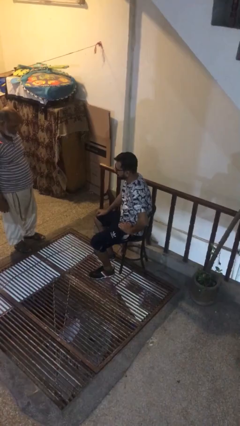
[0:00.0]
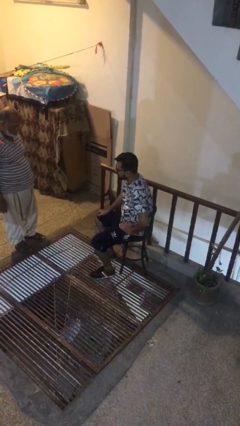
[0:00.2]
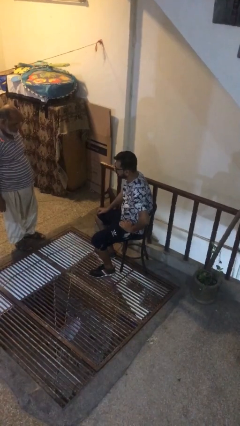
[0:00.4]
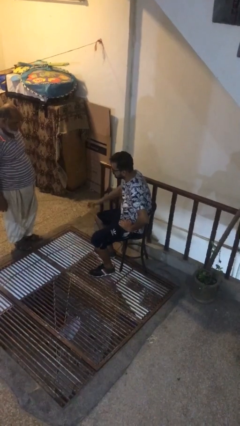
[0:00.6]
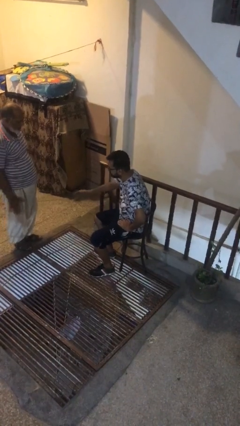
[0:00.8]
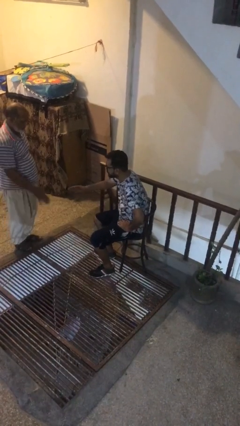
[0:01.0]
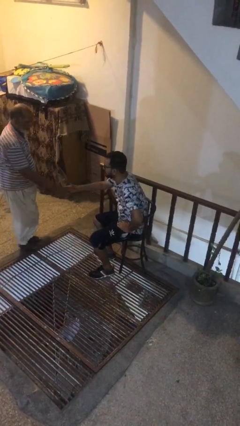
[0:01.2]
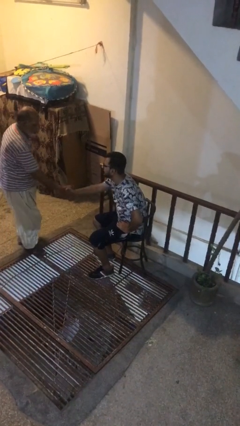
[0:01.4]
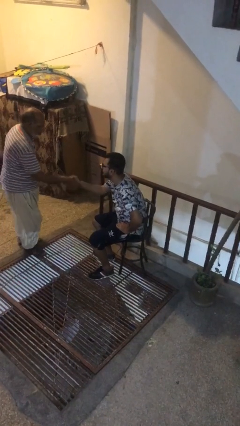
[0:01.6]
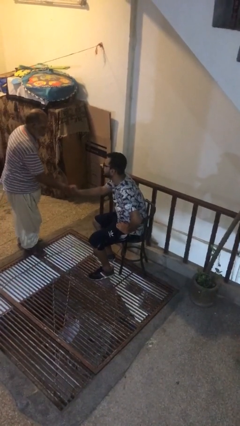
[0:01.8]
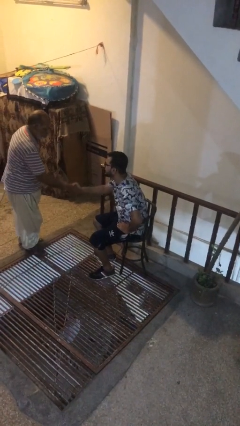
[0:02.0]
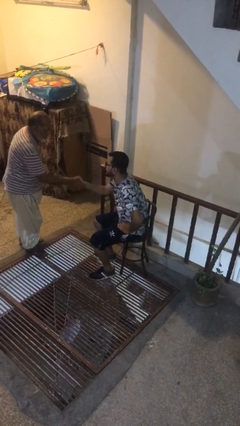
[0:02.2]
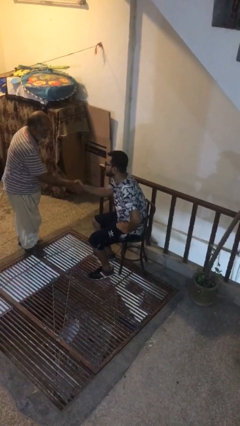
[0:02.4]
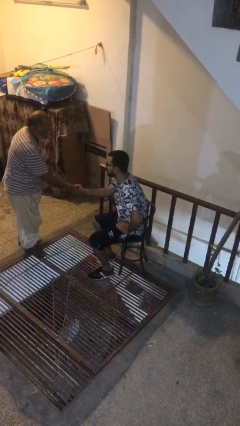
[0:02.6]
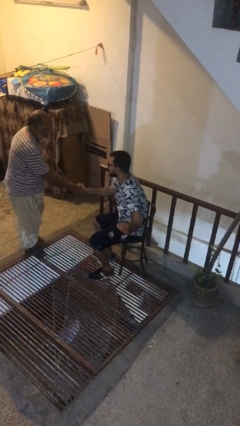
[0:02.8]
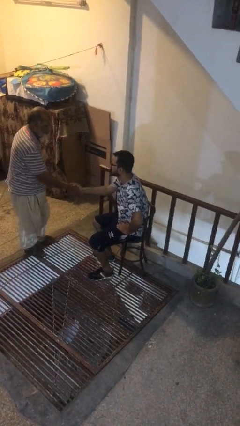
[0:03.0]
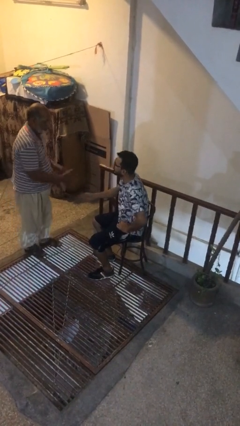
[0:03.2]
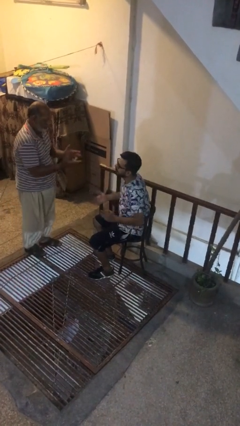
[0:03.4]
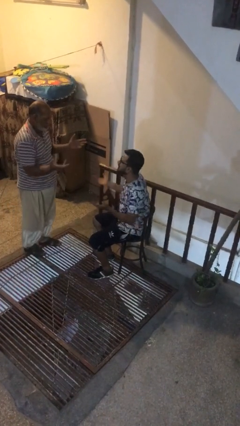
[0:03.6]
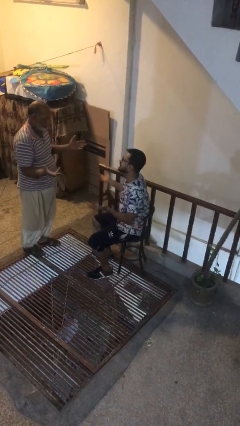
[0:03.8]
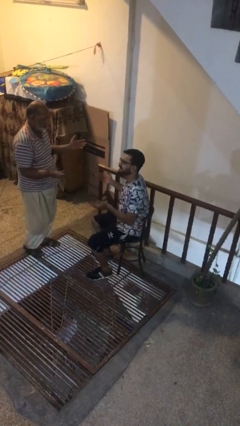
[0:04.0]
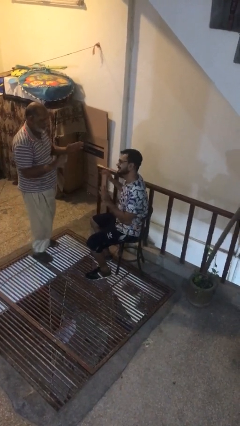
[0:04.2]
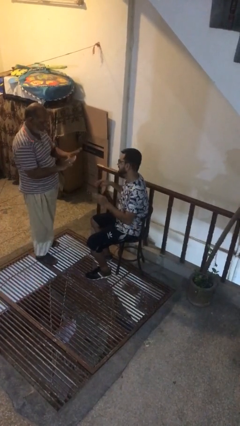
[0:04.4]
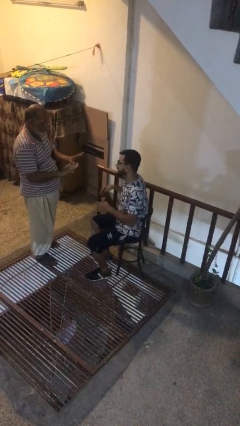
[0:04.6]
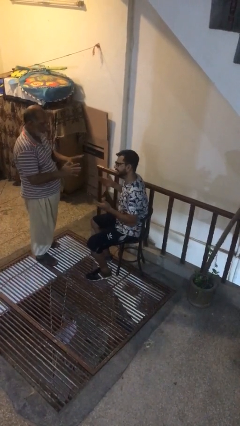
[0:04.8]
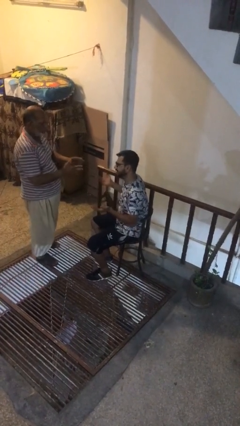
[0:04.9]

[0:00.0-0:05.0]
person shakes hand

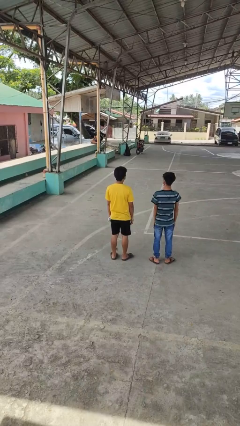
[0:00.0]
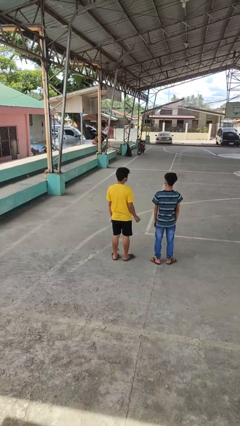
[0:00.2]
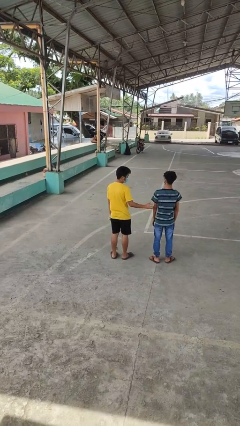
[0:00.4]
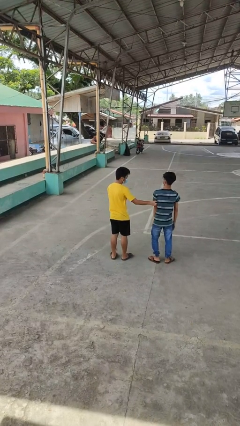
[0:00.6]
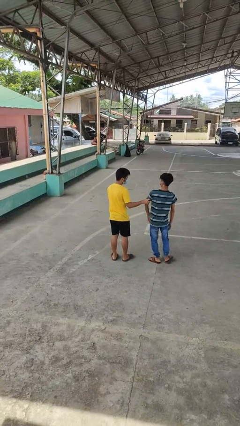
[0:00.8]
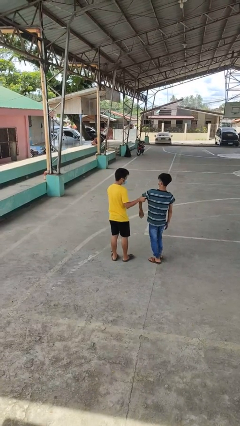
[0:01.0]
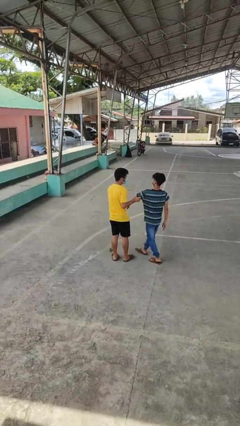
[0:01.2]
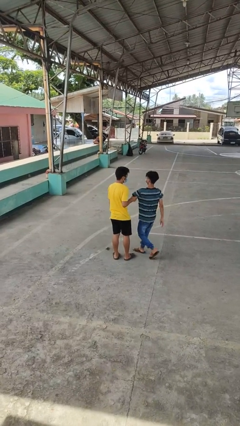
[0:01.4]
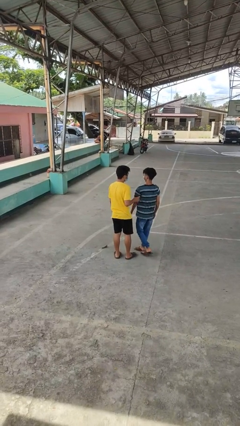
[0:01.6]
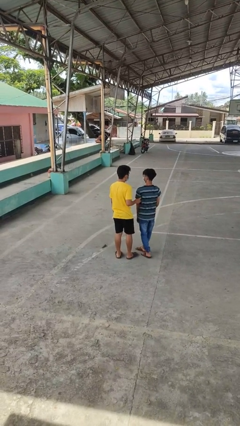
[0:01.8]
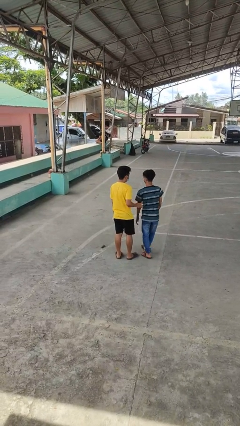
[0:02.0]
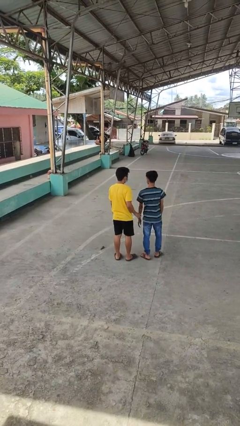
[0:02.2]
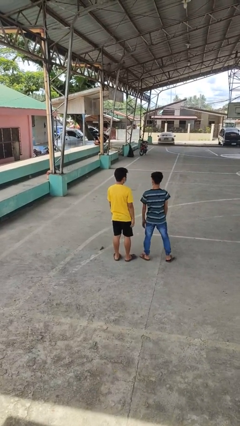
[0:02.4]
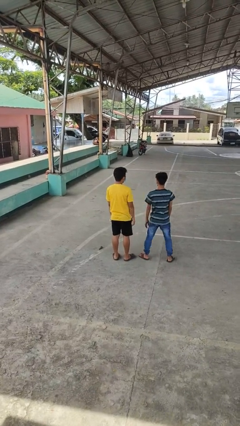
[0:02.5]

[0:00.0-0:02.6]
person grabs person by bicep

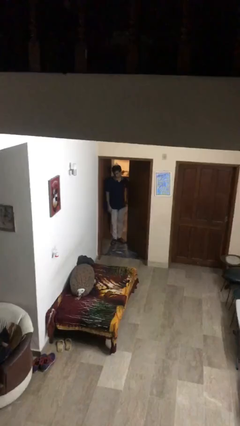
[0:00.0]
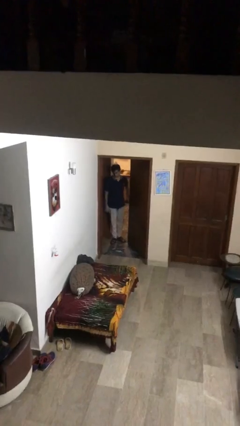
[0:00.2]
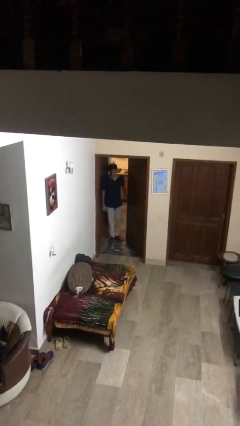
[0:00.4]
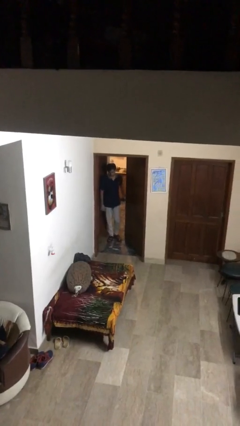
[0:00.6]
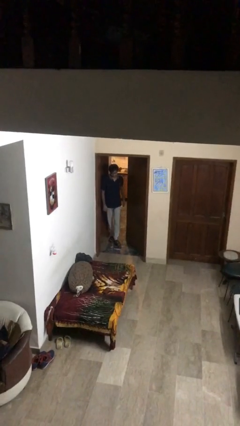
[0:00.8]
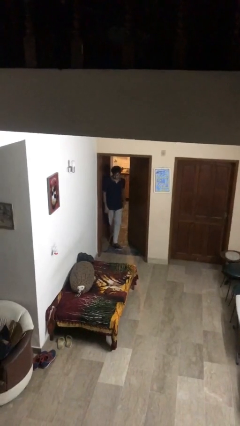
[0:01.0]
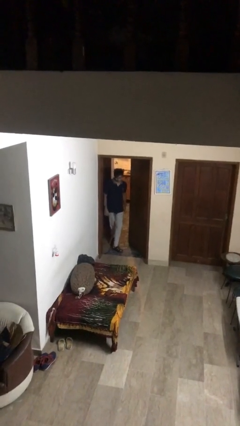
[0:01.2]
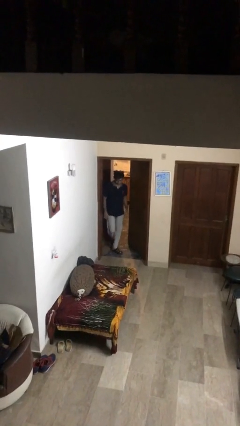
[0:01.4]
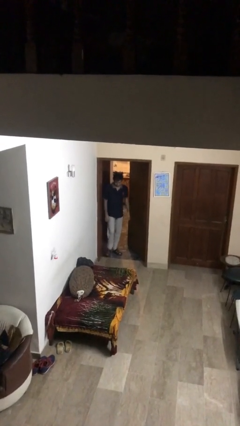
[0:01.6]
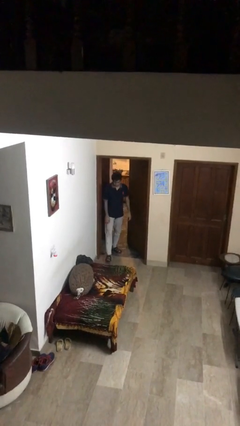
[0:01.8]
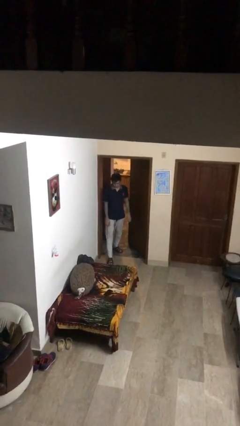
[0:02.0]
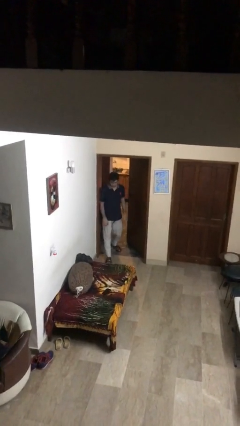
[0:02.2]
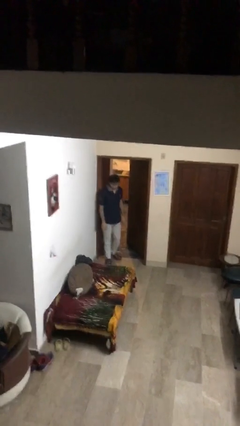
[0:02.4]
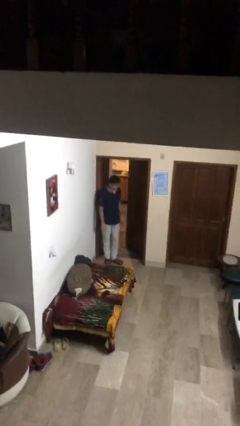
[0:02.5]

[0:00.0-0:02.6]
person enters scene through structure

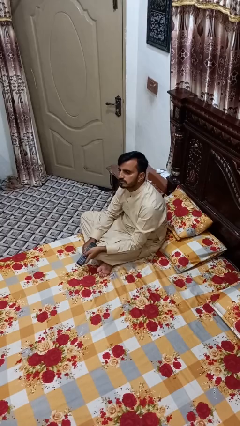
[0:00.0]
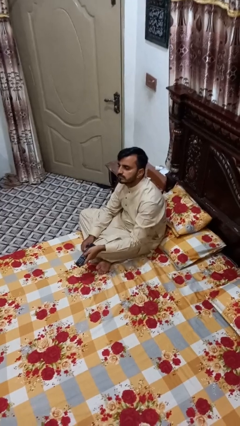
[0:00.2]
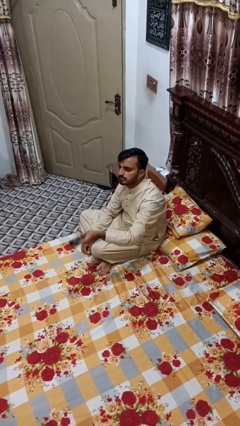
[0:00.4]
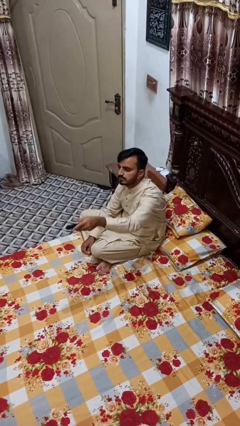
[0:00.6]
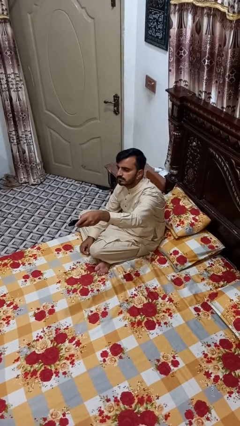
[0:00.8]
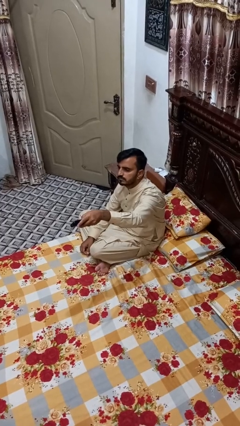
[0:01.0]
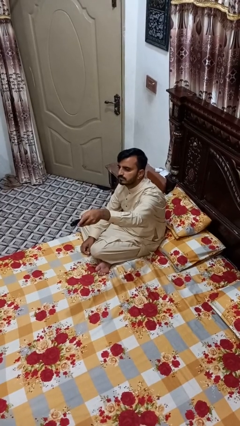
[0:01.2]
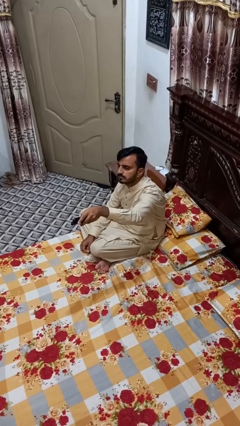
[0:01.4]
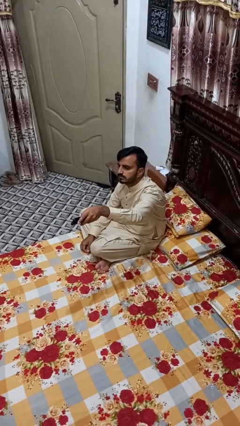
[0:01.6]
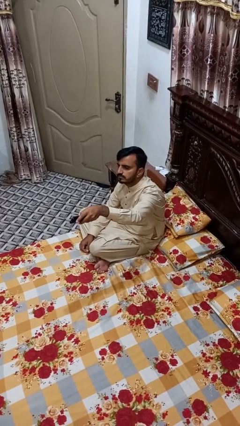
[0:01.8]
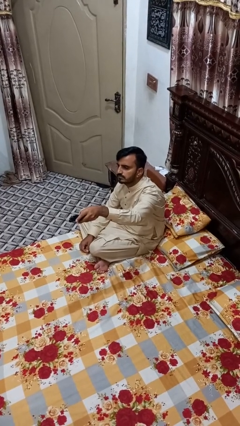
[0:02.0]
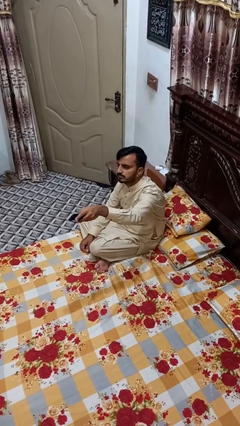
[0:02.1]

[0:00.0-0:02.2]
person uses television remote

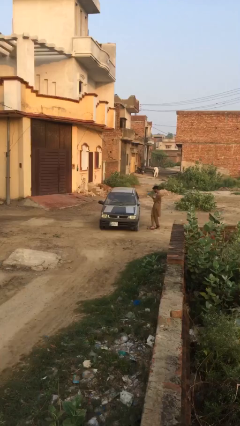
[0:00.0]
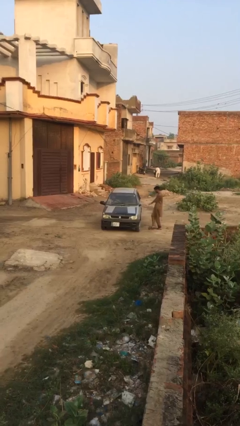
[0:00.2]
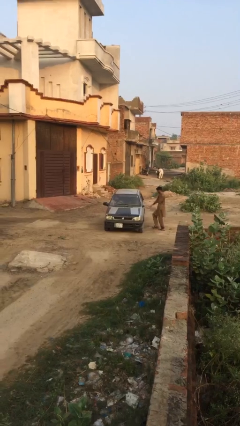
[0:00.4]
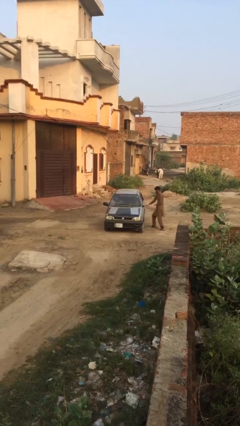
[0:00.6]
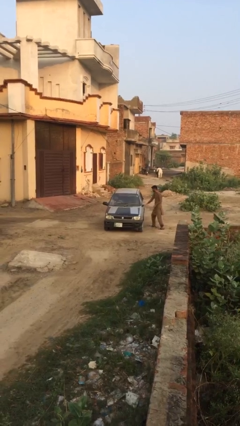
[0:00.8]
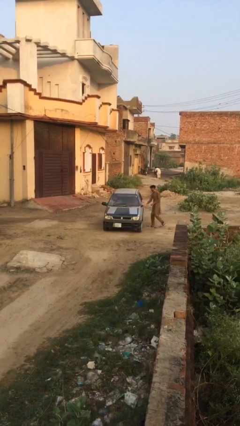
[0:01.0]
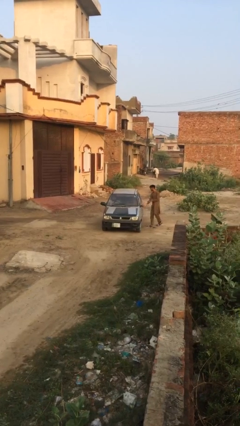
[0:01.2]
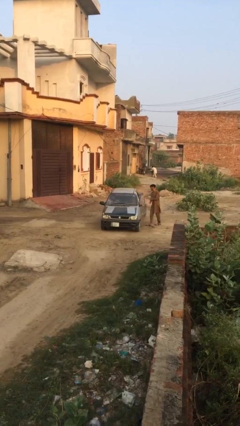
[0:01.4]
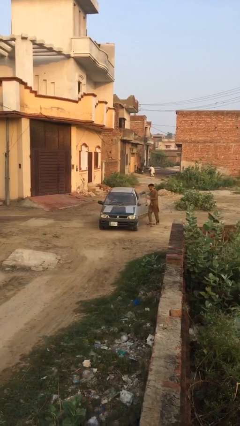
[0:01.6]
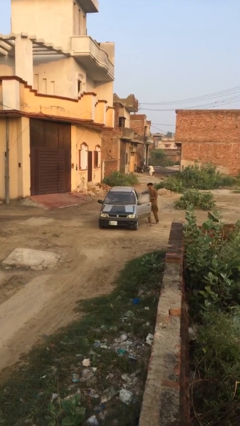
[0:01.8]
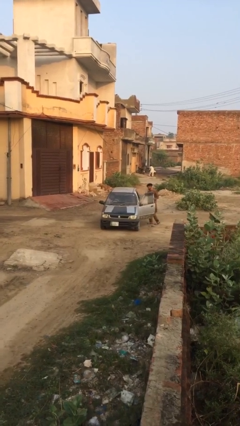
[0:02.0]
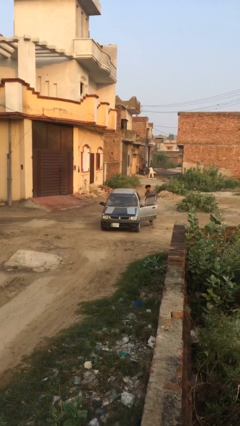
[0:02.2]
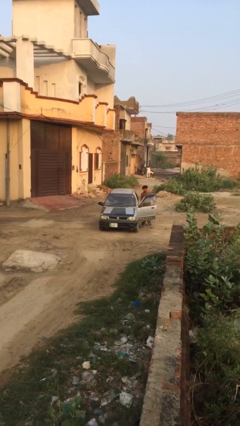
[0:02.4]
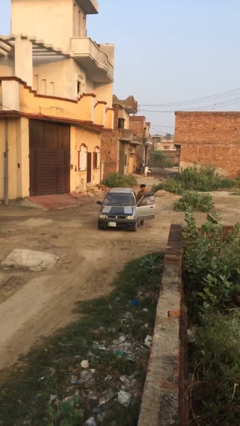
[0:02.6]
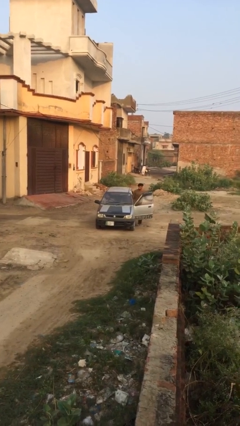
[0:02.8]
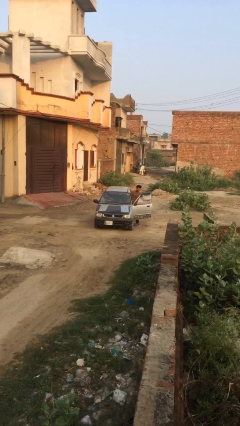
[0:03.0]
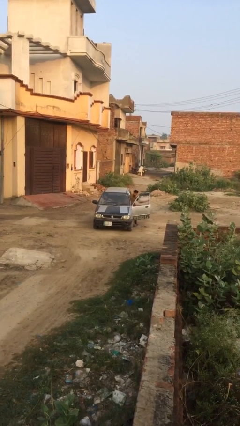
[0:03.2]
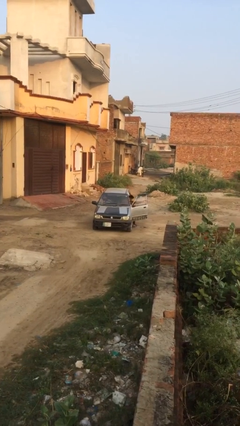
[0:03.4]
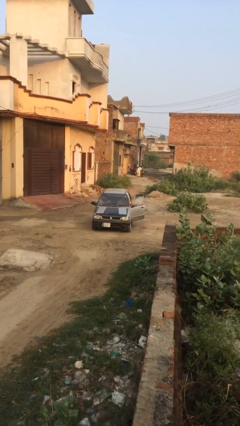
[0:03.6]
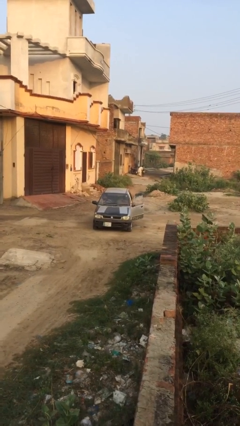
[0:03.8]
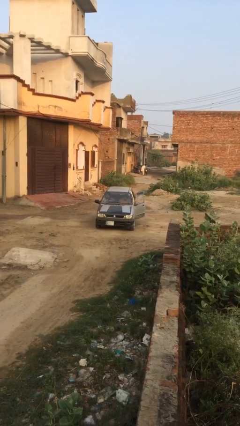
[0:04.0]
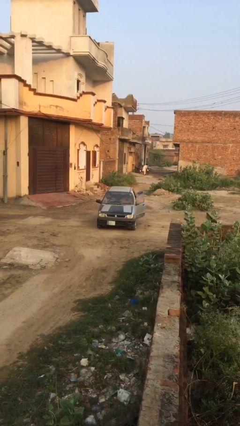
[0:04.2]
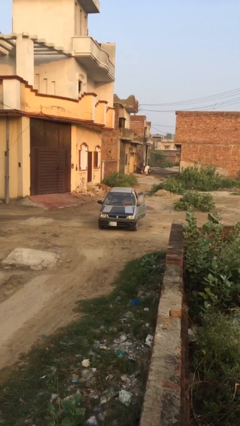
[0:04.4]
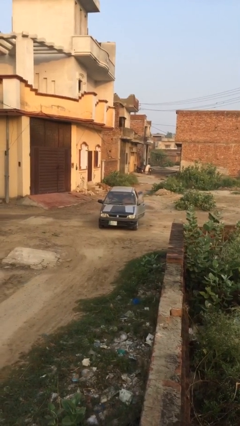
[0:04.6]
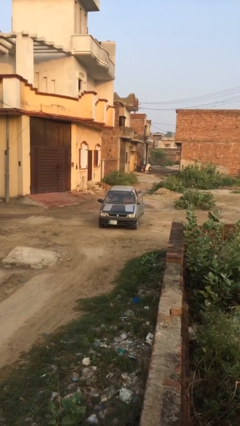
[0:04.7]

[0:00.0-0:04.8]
car picks up person
